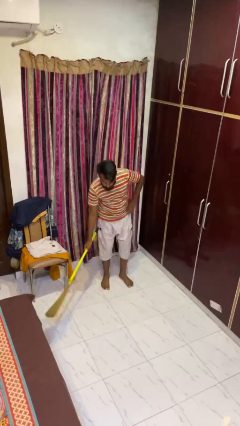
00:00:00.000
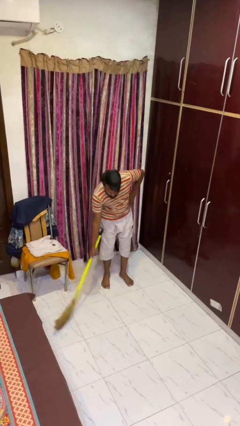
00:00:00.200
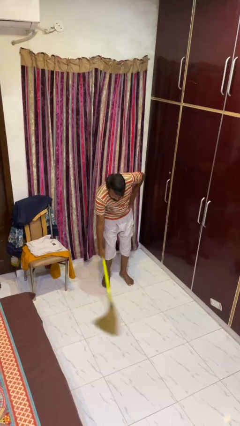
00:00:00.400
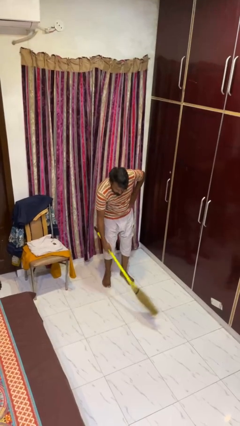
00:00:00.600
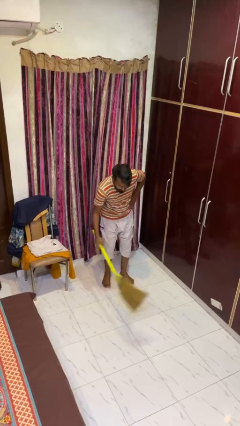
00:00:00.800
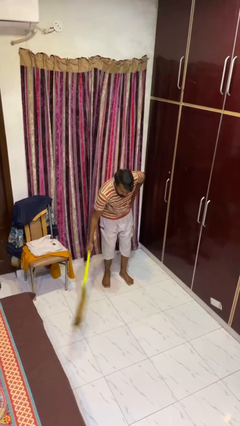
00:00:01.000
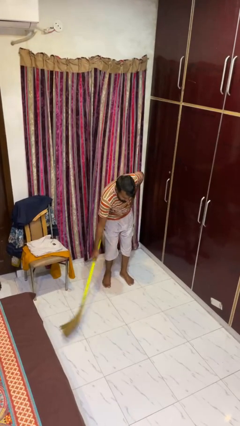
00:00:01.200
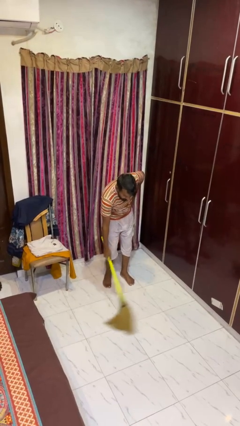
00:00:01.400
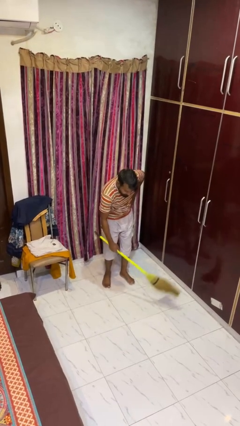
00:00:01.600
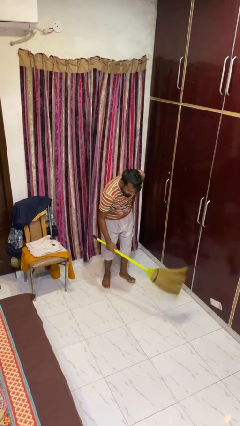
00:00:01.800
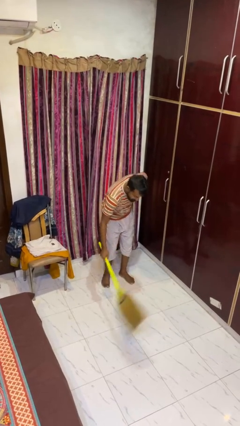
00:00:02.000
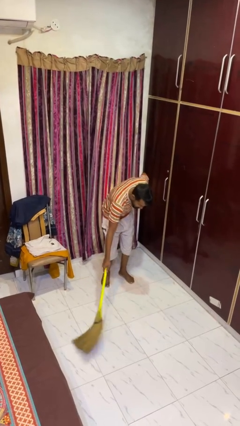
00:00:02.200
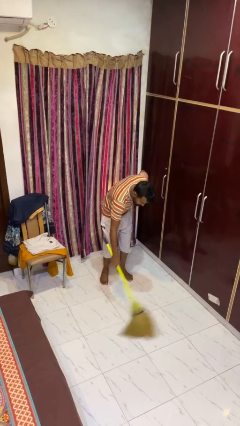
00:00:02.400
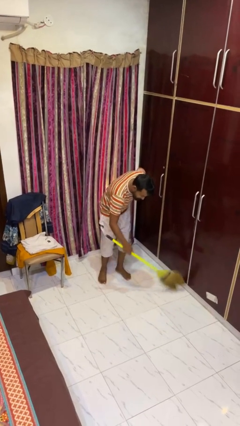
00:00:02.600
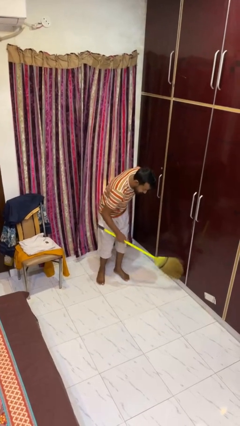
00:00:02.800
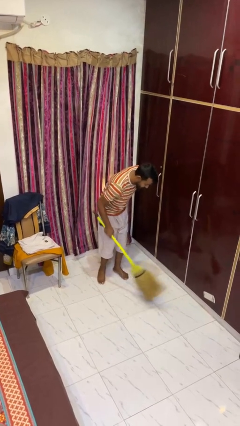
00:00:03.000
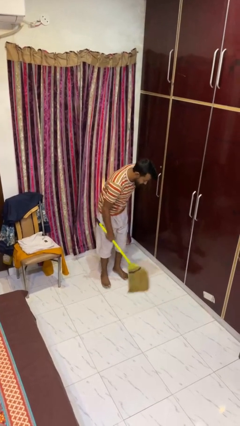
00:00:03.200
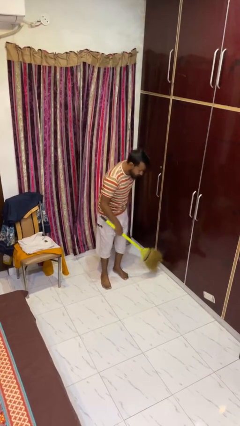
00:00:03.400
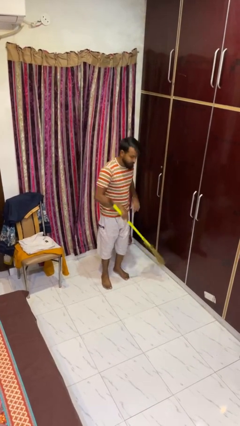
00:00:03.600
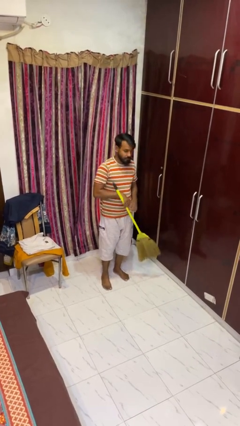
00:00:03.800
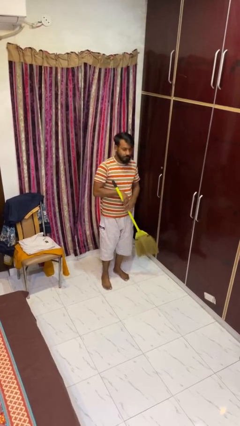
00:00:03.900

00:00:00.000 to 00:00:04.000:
person sweeps floor

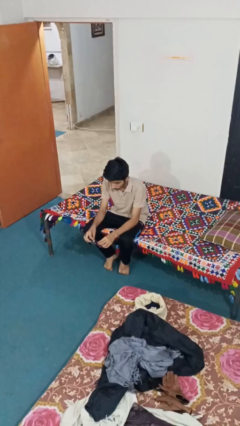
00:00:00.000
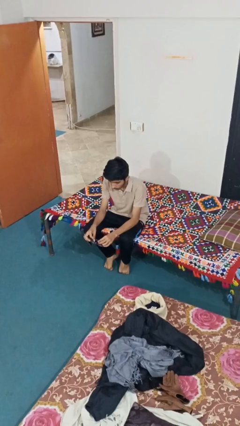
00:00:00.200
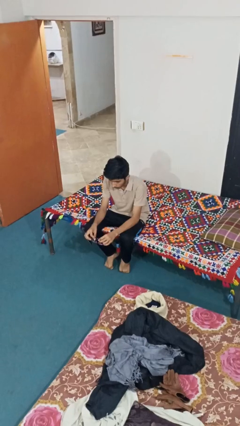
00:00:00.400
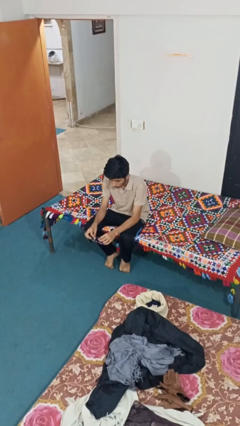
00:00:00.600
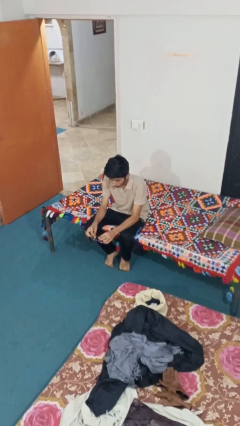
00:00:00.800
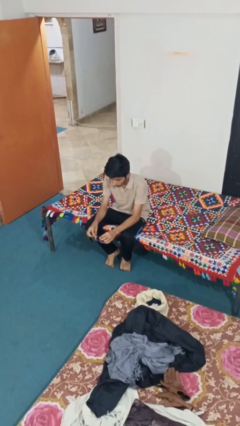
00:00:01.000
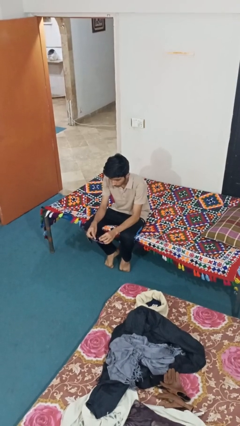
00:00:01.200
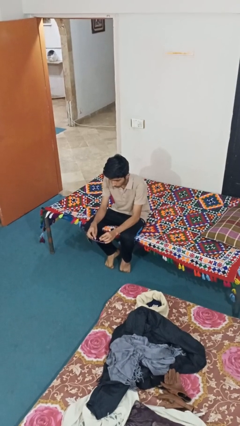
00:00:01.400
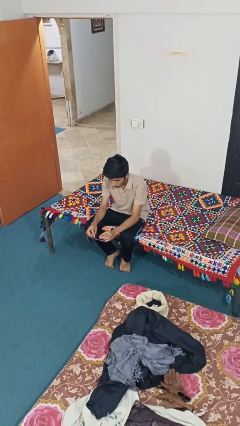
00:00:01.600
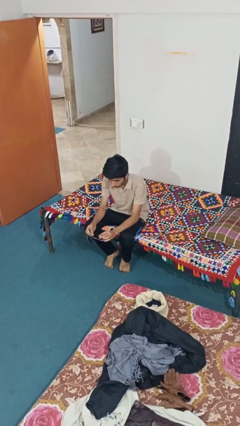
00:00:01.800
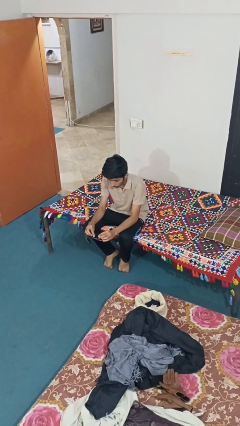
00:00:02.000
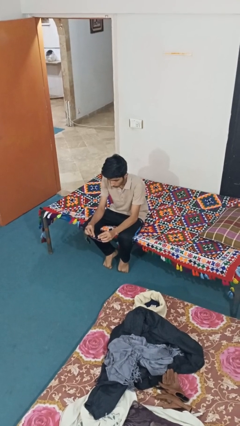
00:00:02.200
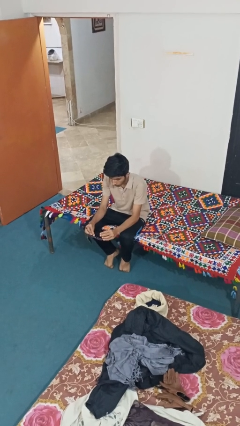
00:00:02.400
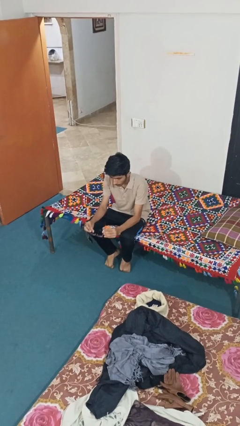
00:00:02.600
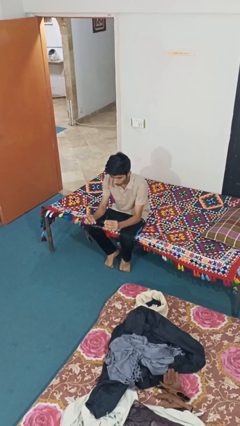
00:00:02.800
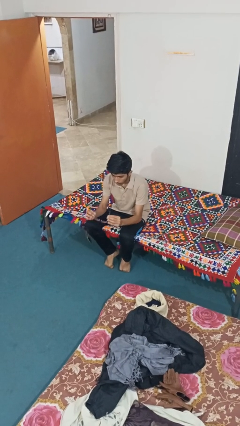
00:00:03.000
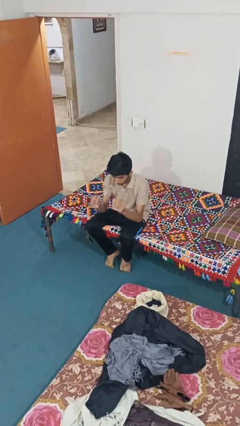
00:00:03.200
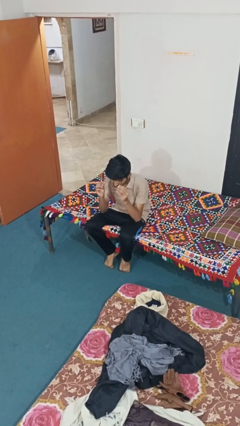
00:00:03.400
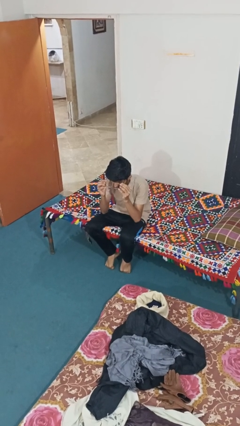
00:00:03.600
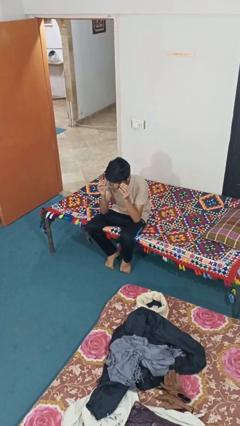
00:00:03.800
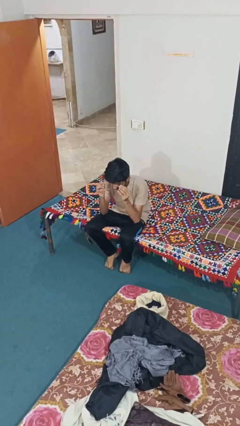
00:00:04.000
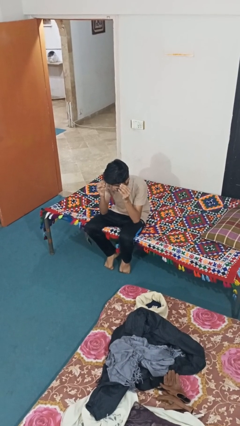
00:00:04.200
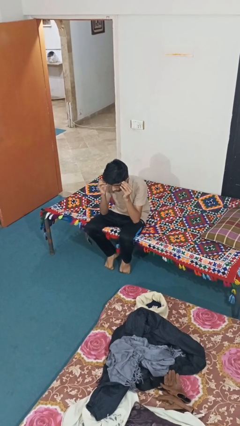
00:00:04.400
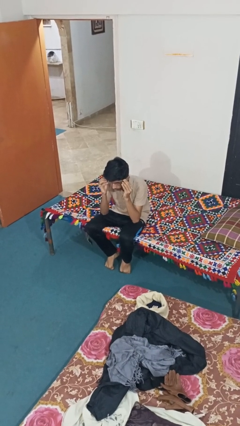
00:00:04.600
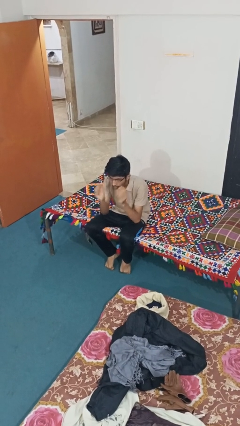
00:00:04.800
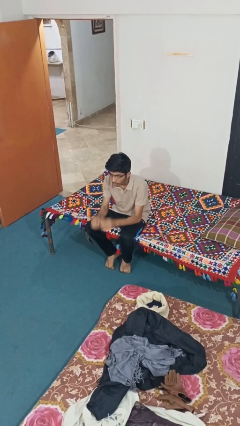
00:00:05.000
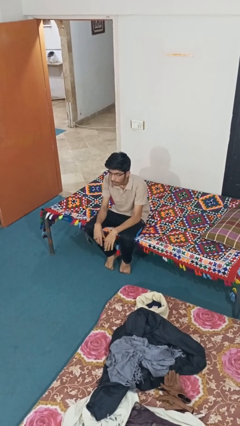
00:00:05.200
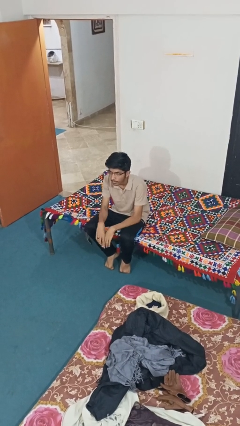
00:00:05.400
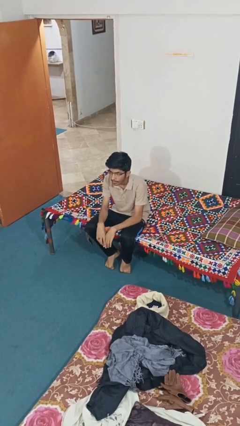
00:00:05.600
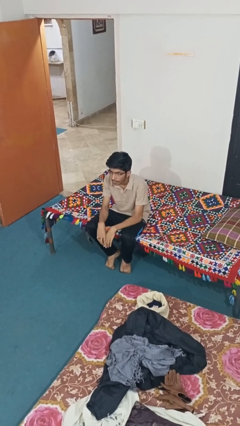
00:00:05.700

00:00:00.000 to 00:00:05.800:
person puts on glasses

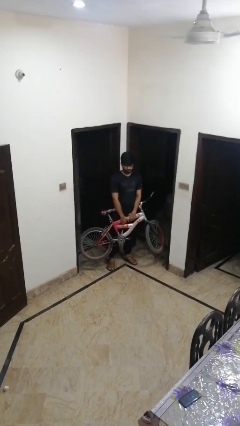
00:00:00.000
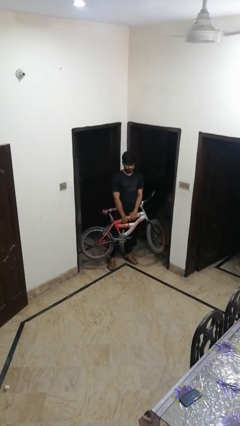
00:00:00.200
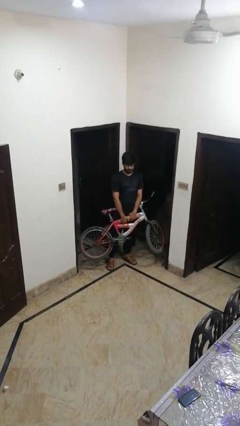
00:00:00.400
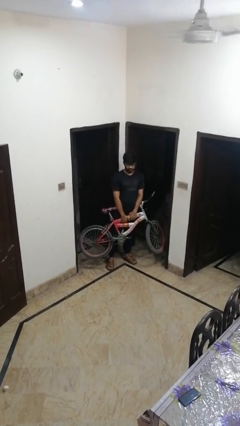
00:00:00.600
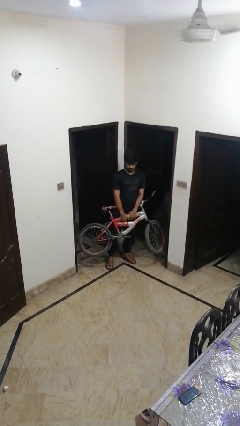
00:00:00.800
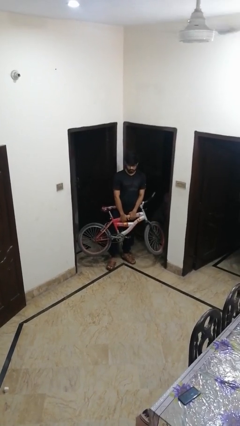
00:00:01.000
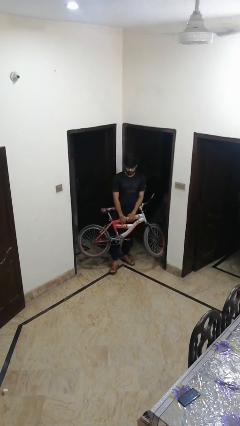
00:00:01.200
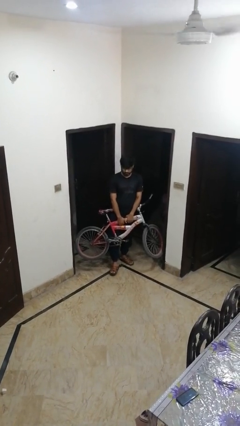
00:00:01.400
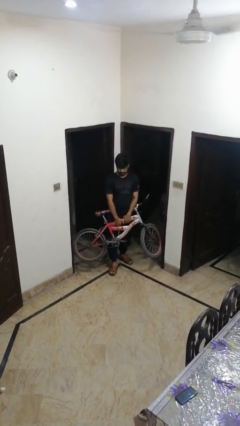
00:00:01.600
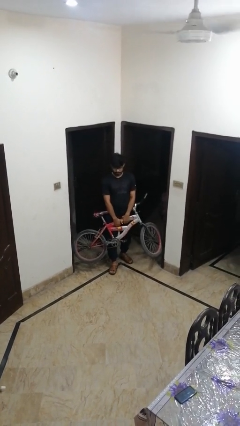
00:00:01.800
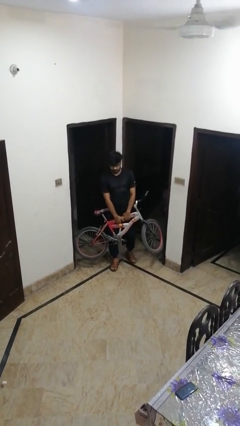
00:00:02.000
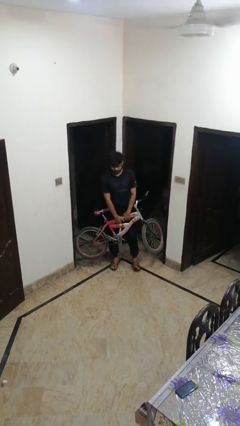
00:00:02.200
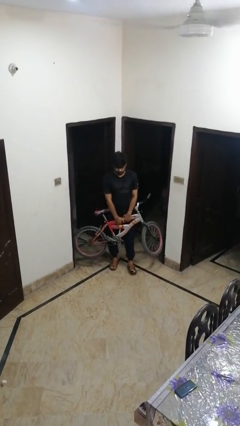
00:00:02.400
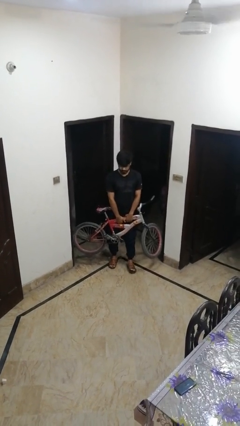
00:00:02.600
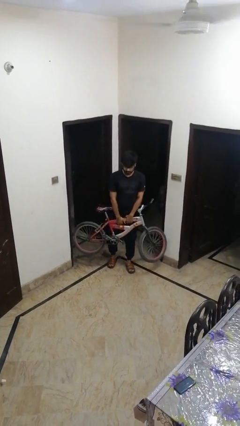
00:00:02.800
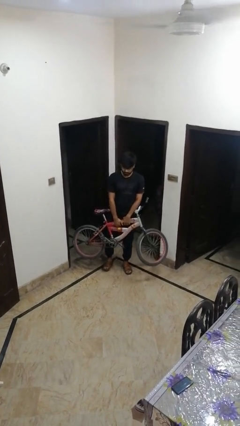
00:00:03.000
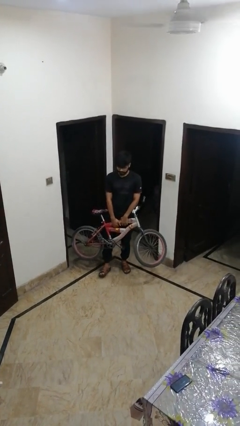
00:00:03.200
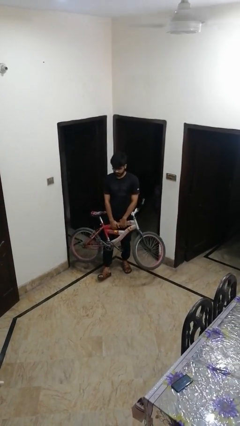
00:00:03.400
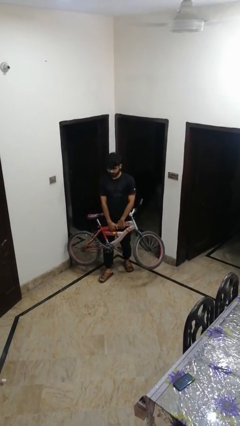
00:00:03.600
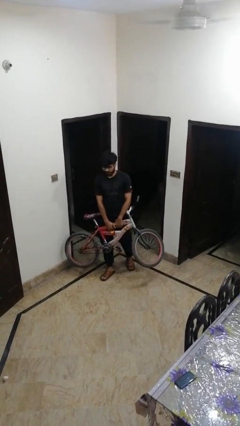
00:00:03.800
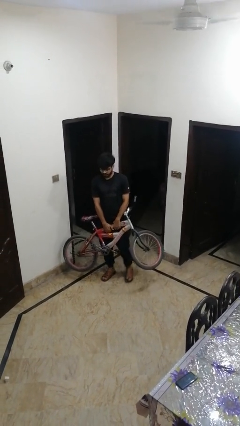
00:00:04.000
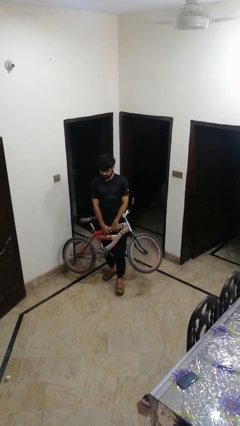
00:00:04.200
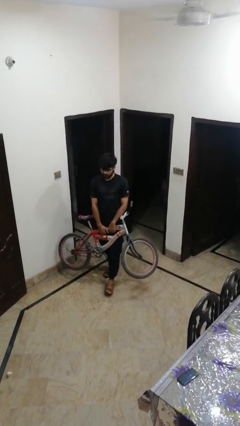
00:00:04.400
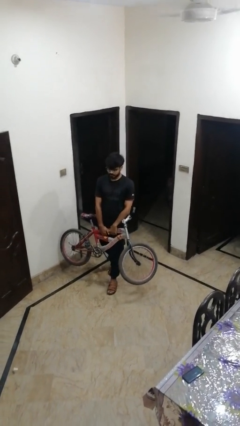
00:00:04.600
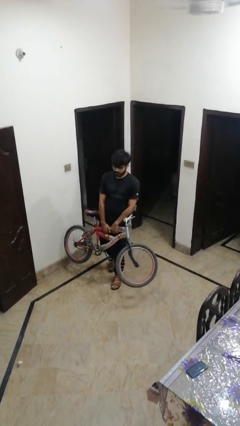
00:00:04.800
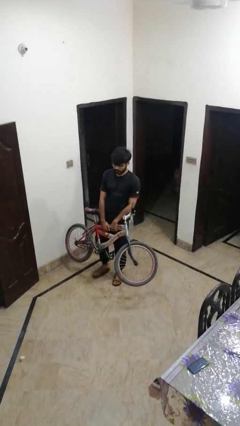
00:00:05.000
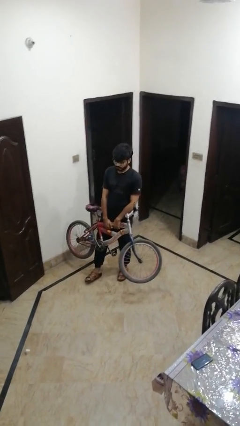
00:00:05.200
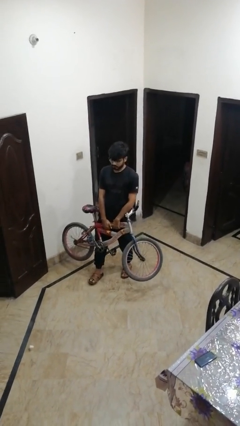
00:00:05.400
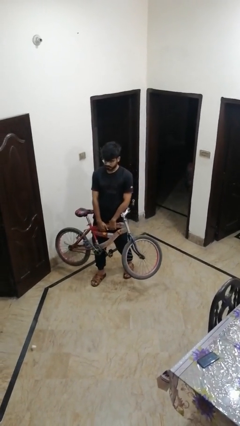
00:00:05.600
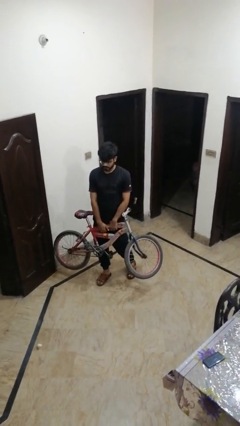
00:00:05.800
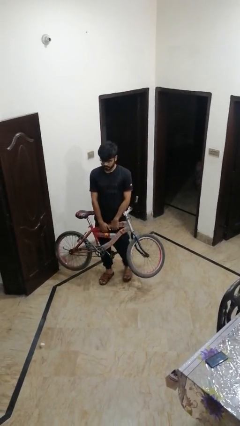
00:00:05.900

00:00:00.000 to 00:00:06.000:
person carries bicycle

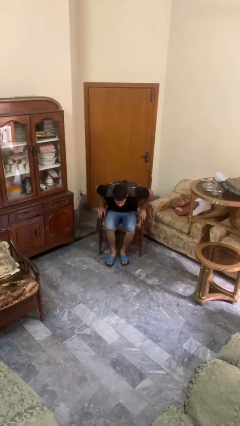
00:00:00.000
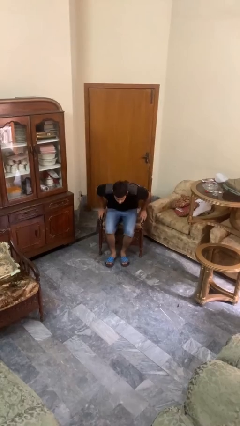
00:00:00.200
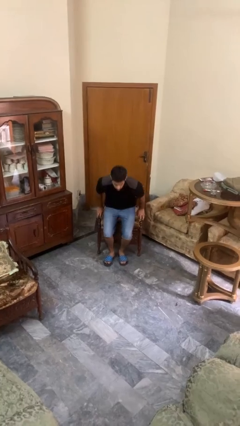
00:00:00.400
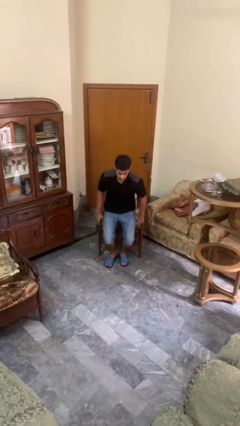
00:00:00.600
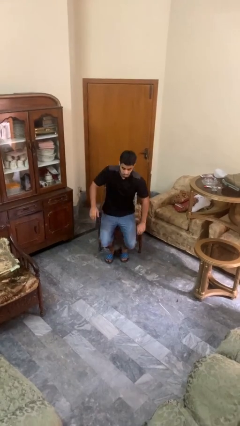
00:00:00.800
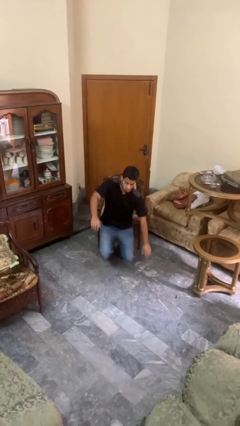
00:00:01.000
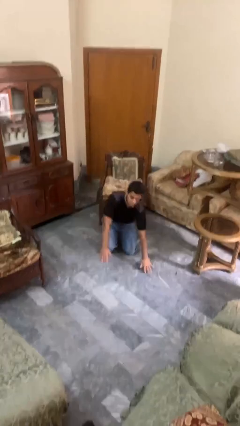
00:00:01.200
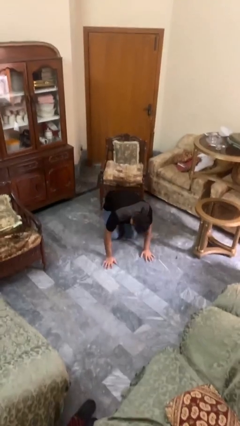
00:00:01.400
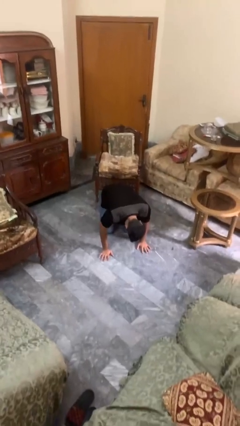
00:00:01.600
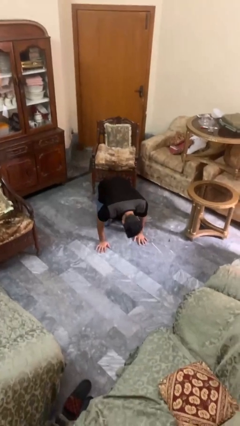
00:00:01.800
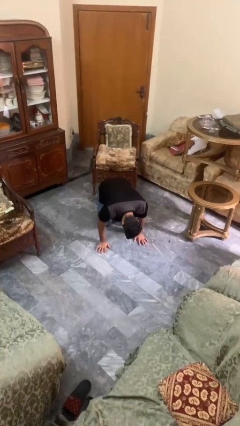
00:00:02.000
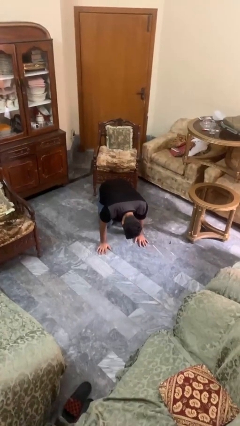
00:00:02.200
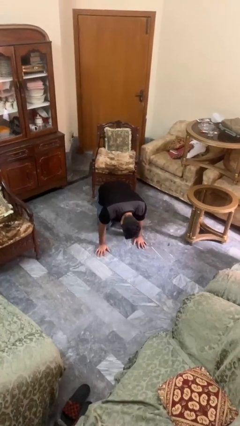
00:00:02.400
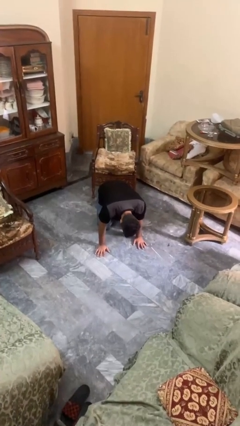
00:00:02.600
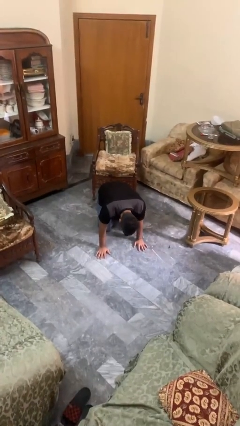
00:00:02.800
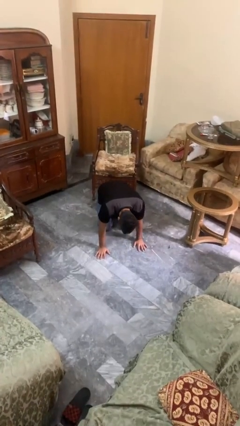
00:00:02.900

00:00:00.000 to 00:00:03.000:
person falls from chair
